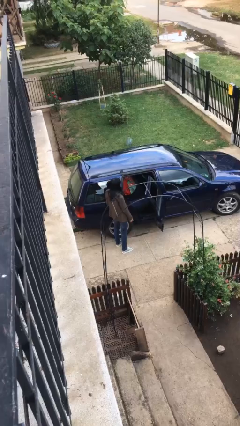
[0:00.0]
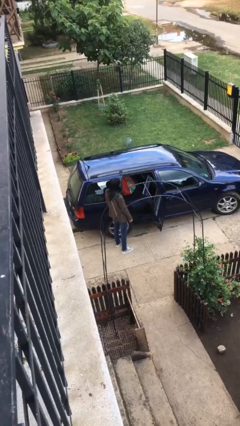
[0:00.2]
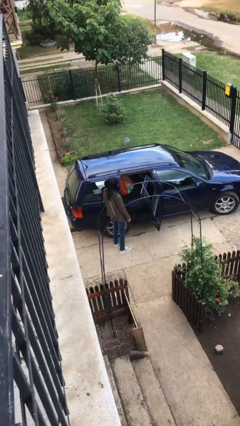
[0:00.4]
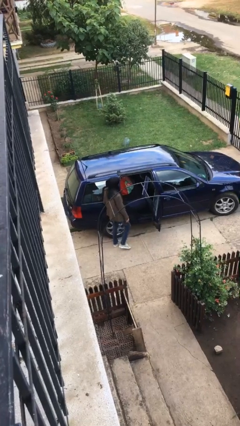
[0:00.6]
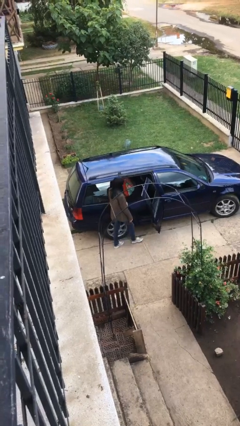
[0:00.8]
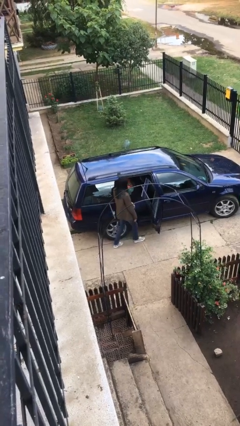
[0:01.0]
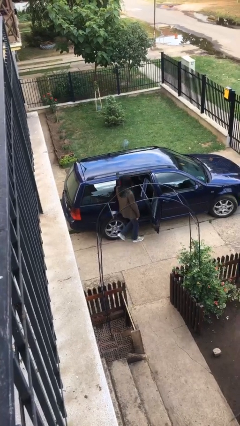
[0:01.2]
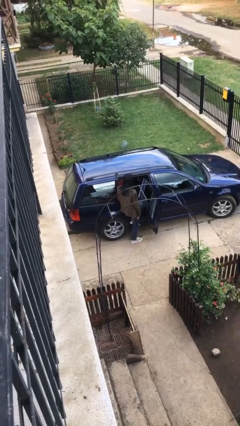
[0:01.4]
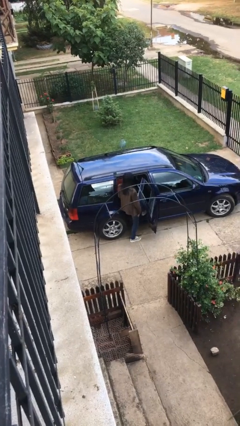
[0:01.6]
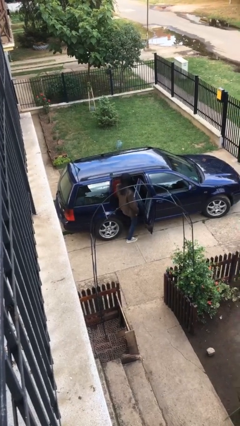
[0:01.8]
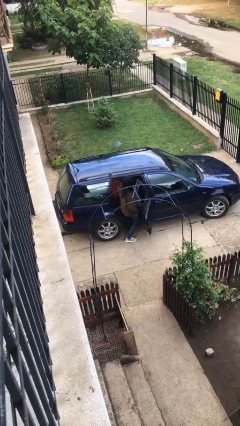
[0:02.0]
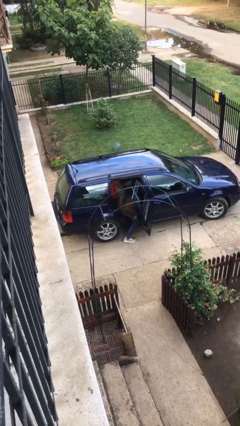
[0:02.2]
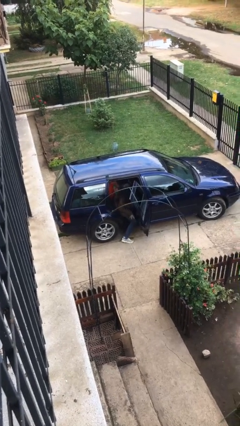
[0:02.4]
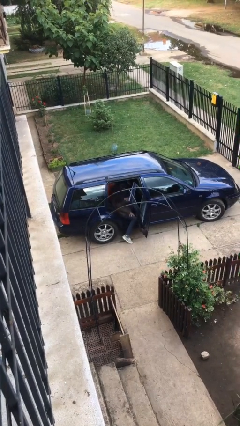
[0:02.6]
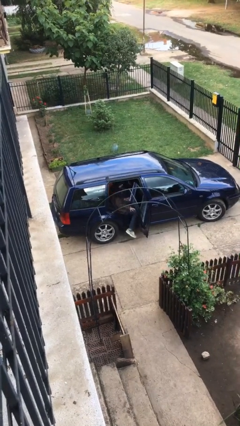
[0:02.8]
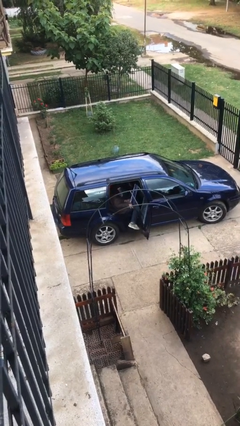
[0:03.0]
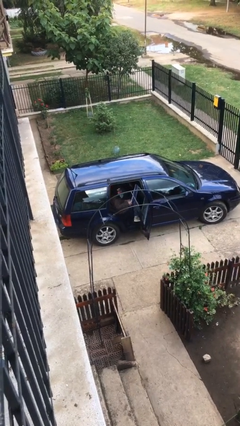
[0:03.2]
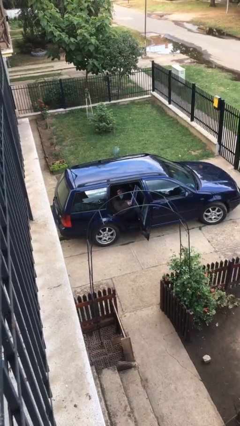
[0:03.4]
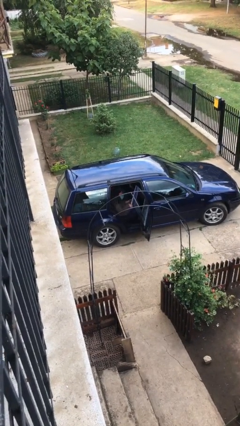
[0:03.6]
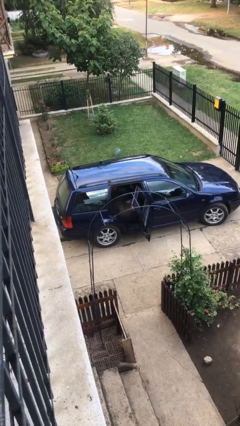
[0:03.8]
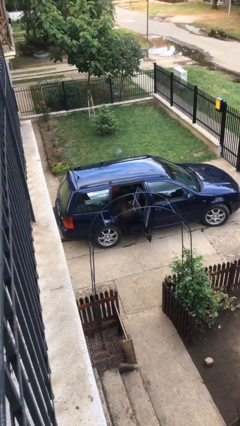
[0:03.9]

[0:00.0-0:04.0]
person enters car

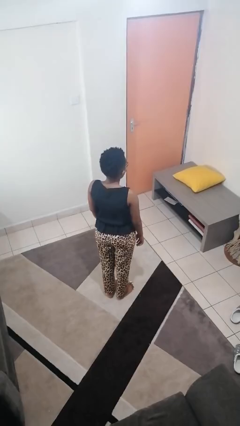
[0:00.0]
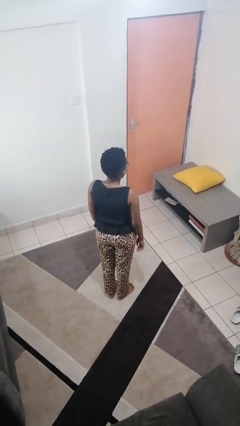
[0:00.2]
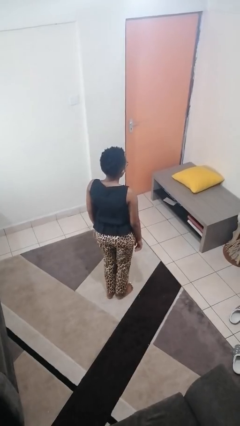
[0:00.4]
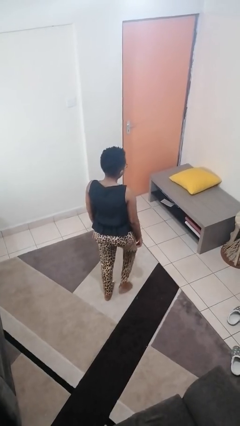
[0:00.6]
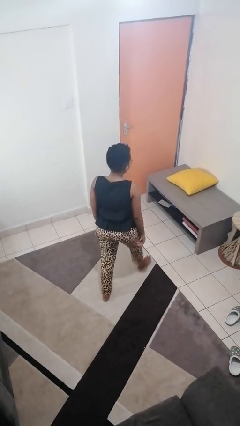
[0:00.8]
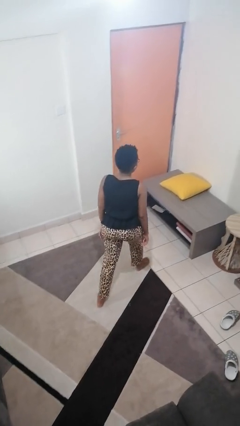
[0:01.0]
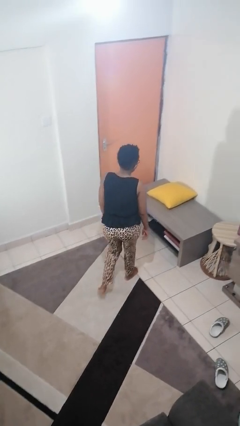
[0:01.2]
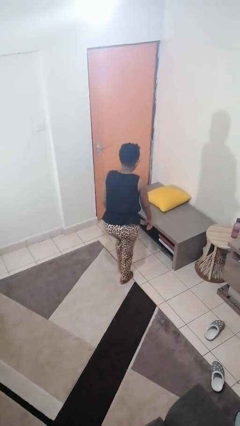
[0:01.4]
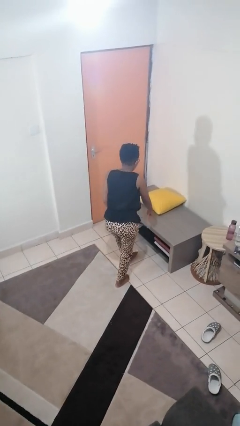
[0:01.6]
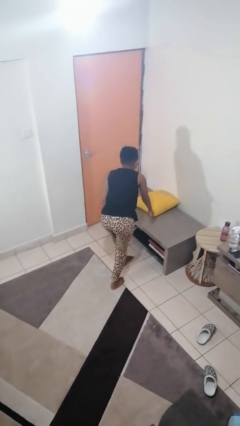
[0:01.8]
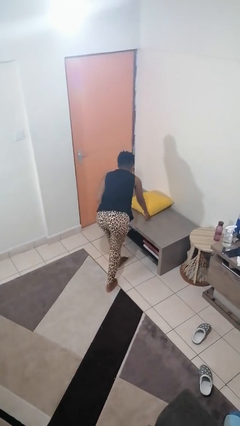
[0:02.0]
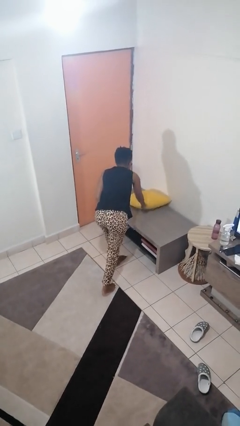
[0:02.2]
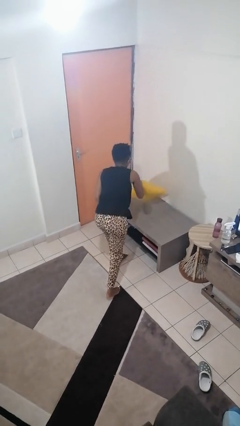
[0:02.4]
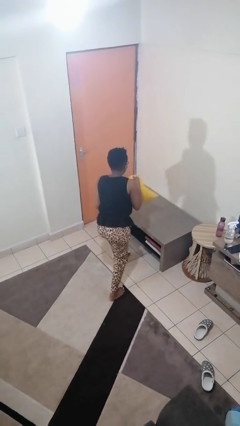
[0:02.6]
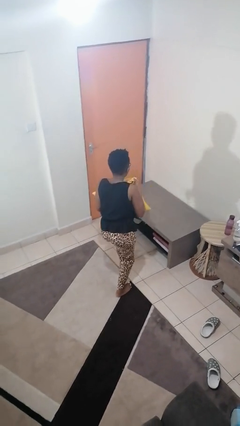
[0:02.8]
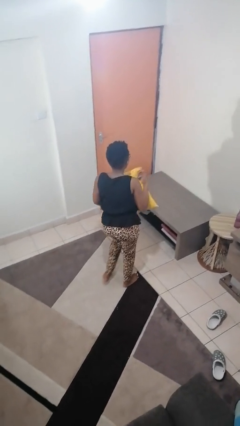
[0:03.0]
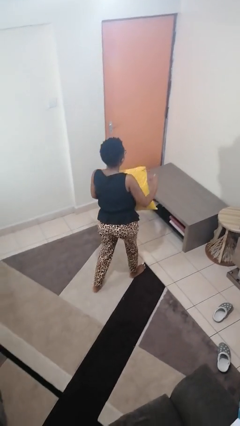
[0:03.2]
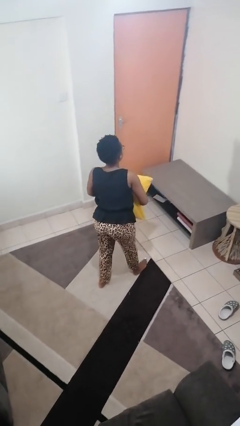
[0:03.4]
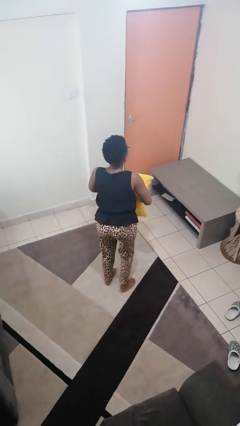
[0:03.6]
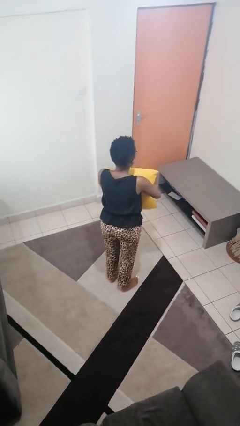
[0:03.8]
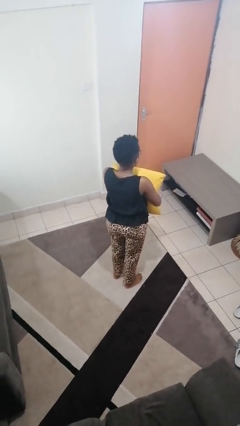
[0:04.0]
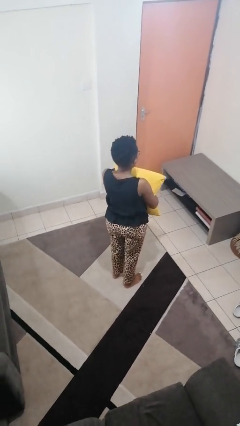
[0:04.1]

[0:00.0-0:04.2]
person picks up object from table

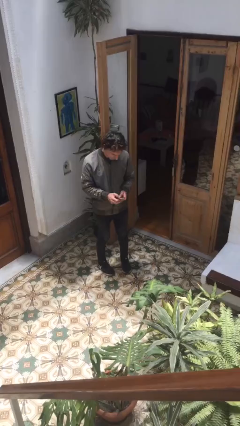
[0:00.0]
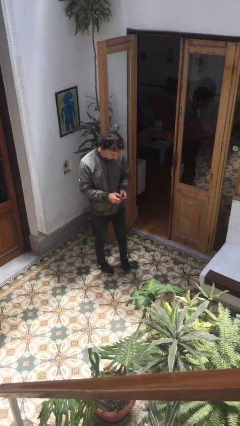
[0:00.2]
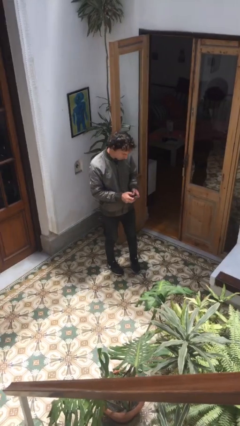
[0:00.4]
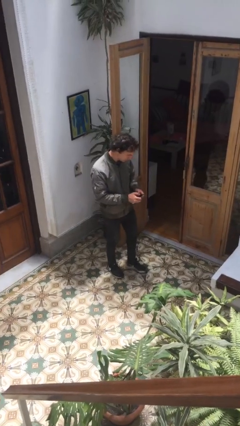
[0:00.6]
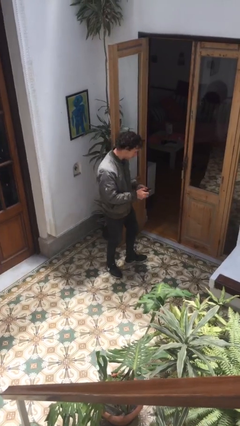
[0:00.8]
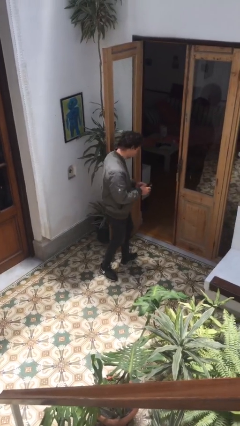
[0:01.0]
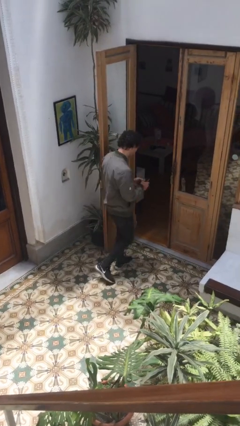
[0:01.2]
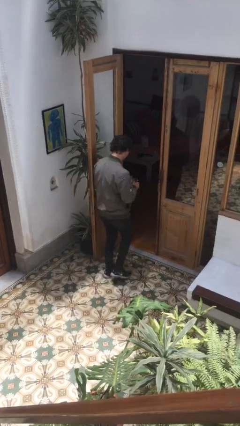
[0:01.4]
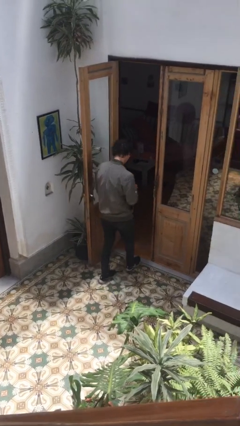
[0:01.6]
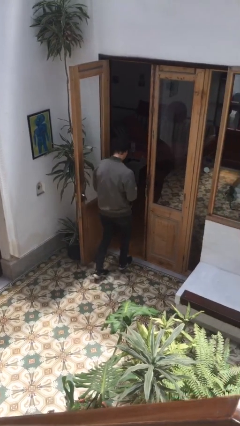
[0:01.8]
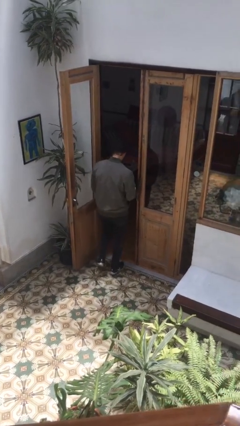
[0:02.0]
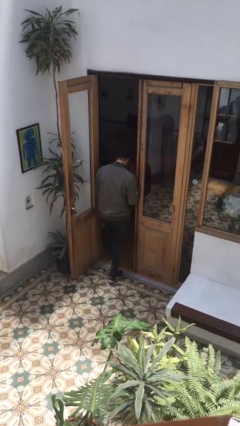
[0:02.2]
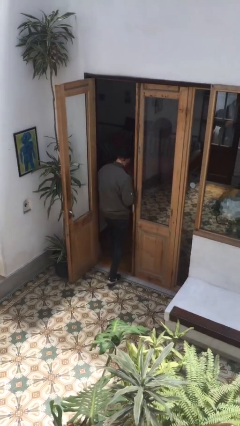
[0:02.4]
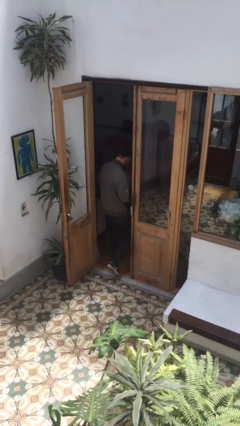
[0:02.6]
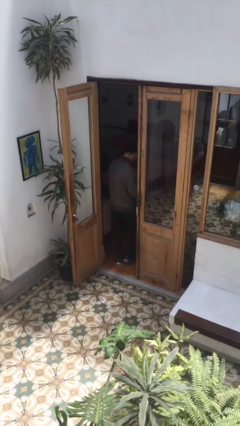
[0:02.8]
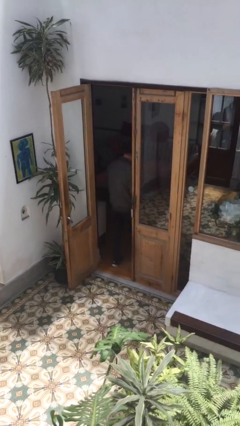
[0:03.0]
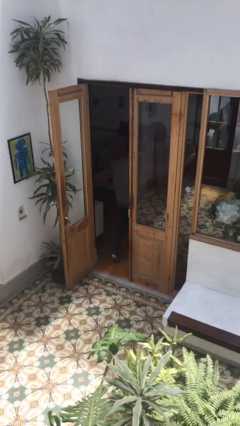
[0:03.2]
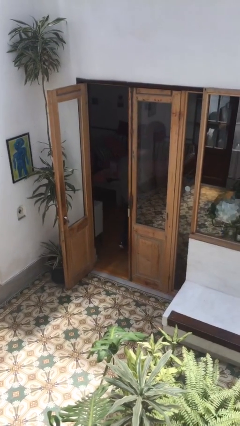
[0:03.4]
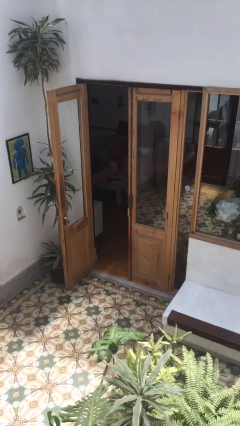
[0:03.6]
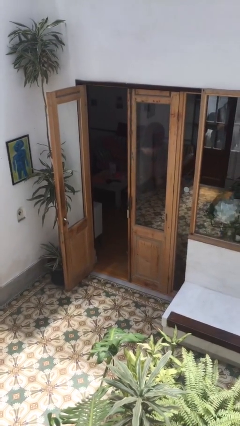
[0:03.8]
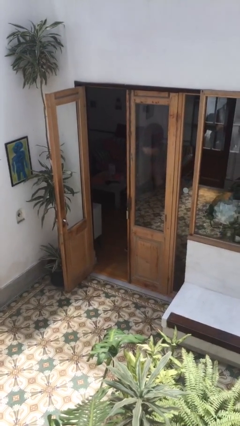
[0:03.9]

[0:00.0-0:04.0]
person exits scene through structure

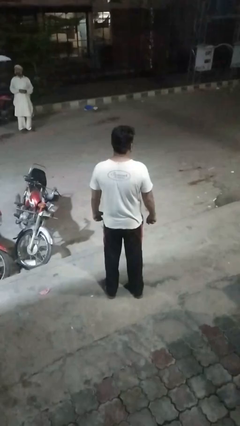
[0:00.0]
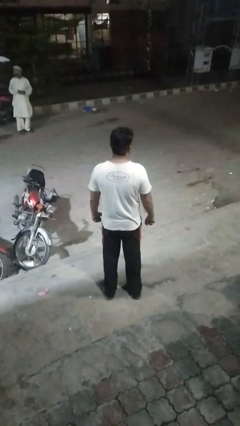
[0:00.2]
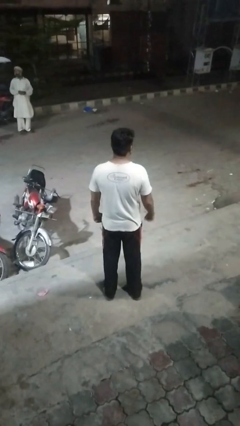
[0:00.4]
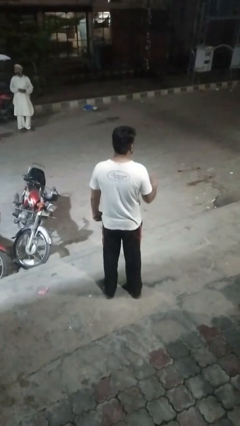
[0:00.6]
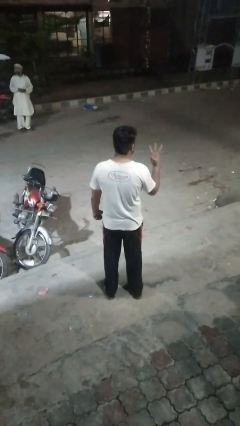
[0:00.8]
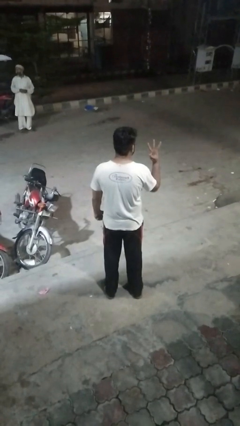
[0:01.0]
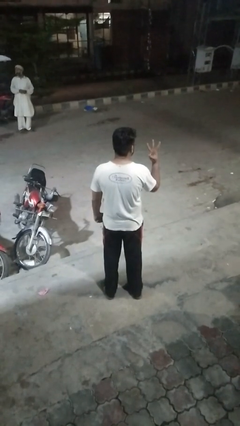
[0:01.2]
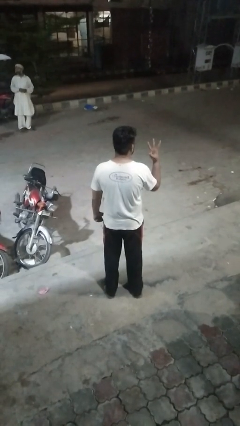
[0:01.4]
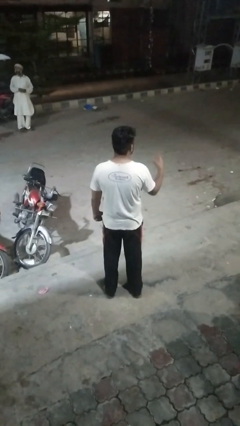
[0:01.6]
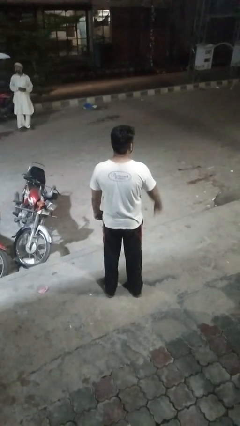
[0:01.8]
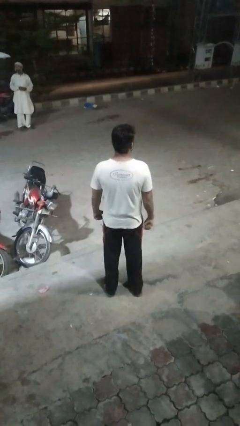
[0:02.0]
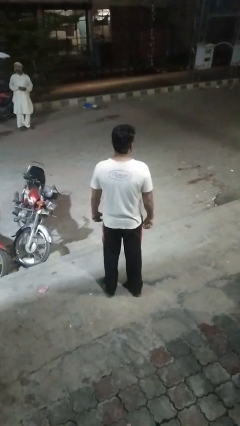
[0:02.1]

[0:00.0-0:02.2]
person gestures number three

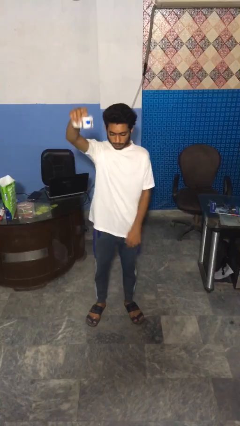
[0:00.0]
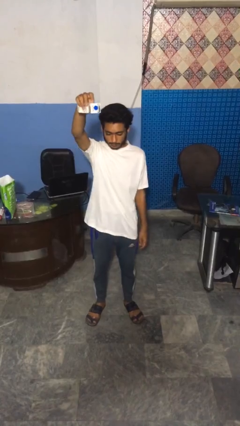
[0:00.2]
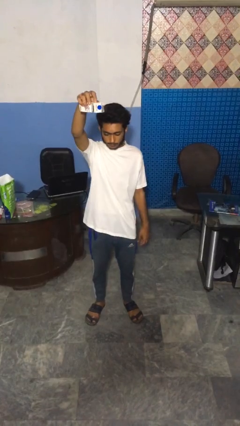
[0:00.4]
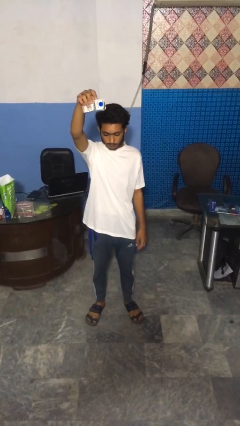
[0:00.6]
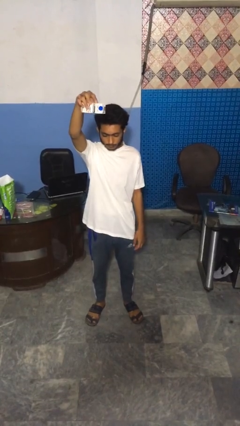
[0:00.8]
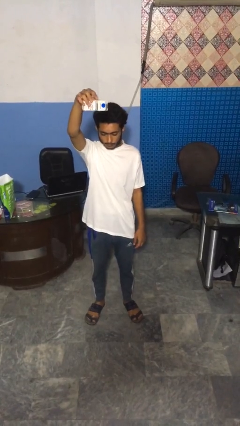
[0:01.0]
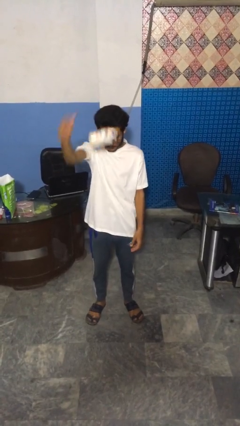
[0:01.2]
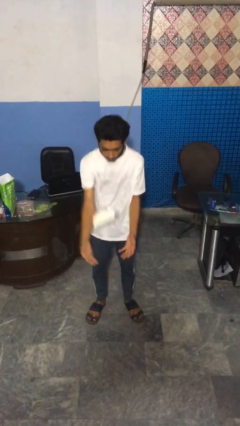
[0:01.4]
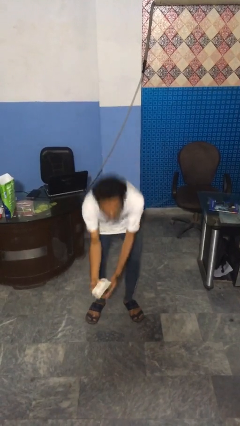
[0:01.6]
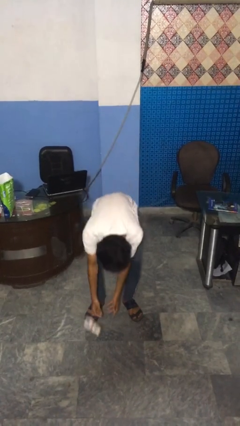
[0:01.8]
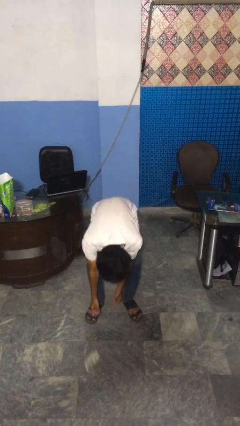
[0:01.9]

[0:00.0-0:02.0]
person drops object

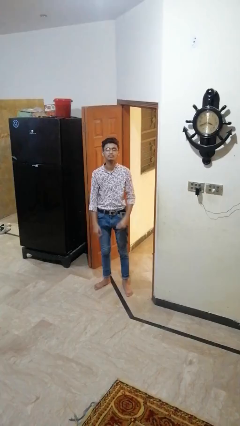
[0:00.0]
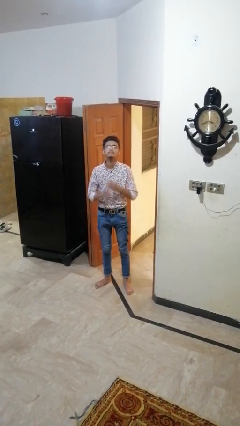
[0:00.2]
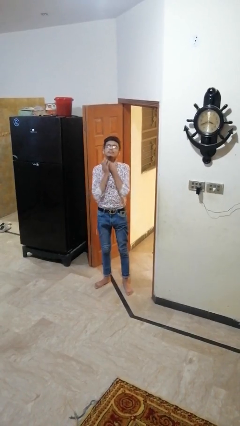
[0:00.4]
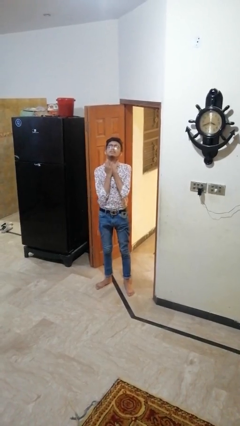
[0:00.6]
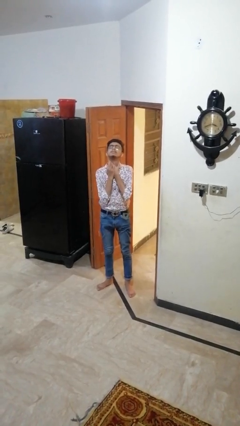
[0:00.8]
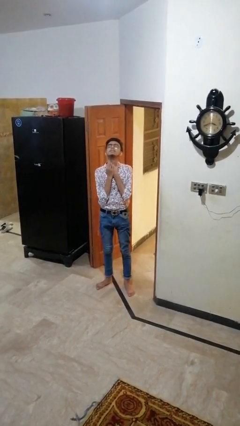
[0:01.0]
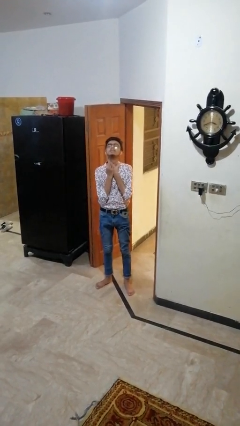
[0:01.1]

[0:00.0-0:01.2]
person rubs neck
